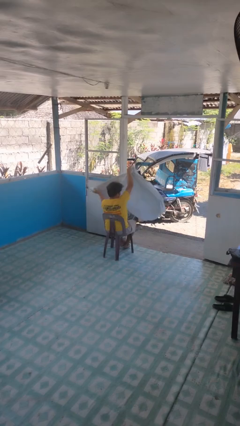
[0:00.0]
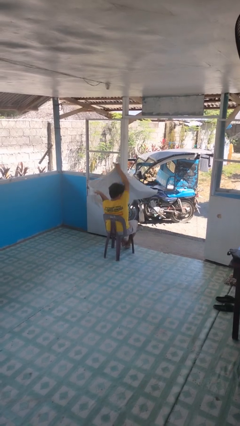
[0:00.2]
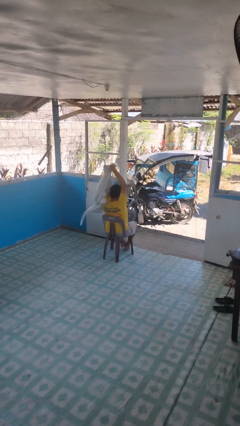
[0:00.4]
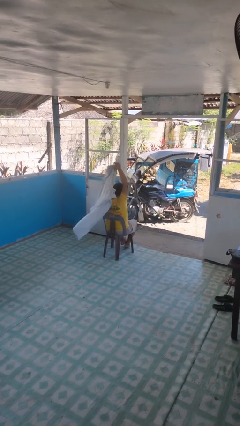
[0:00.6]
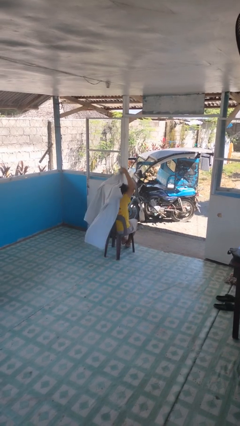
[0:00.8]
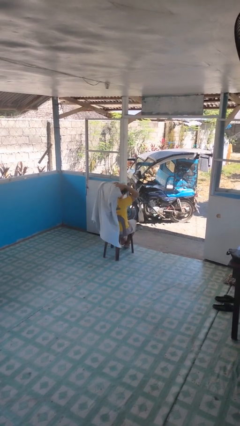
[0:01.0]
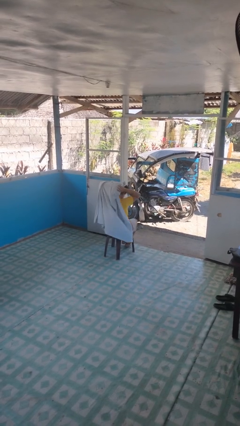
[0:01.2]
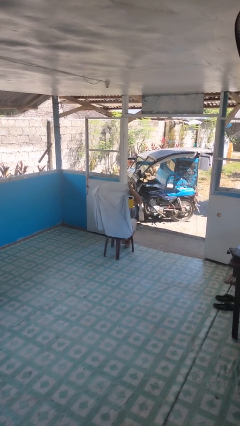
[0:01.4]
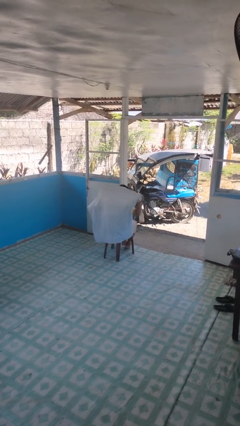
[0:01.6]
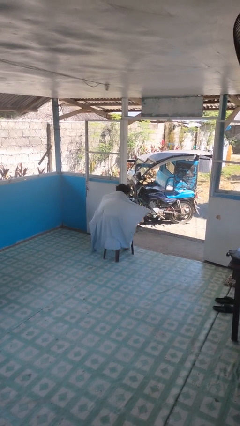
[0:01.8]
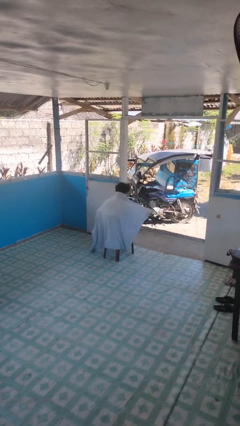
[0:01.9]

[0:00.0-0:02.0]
person covers with blanket

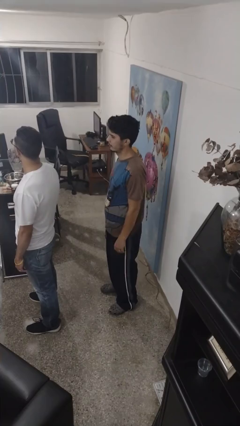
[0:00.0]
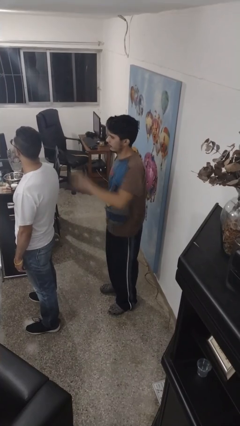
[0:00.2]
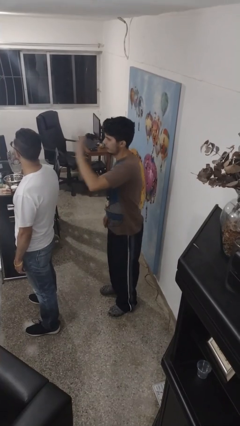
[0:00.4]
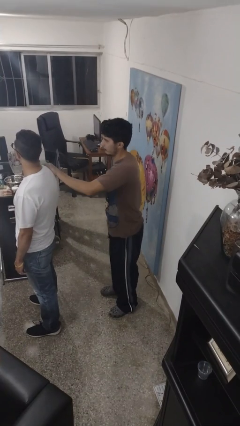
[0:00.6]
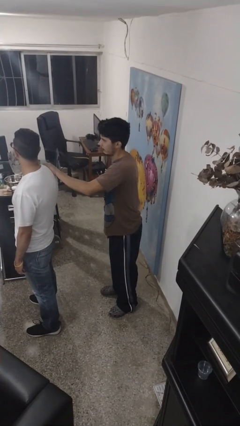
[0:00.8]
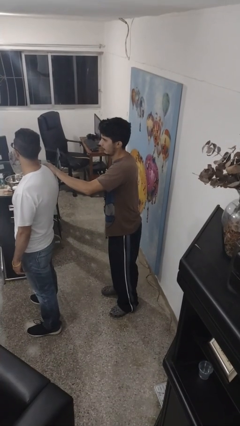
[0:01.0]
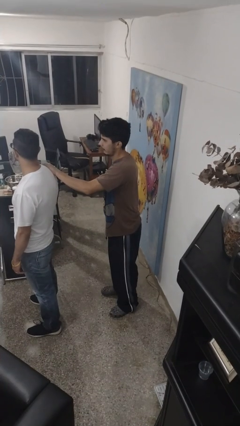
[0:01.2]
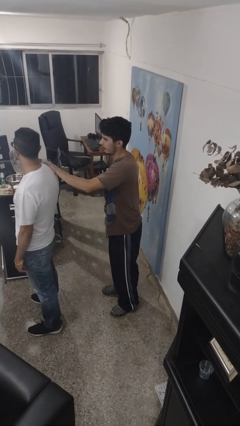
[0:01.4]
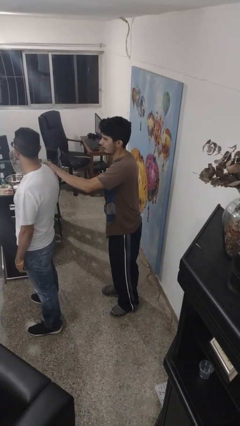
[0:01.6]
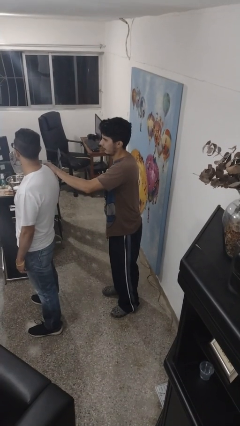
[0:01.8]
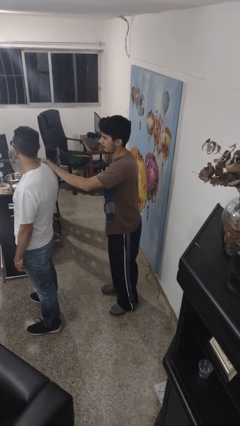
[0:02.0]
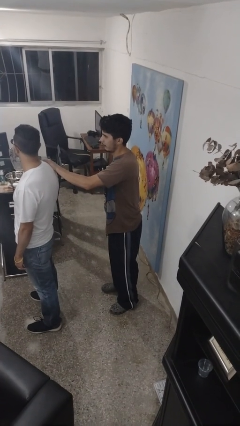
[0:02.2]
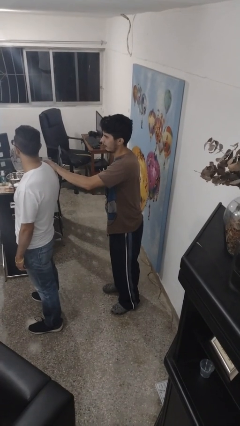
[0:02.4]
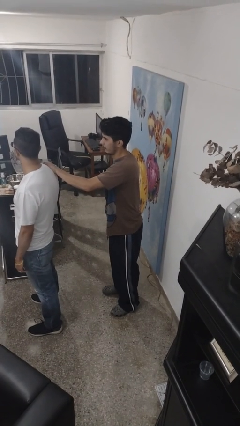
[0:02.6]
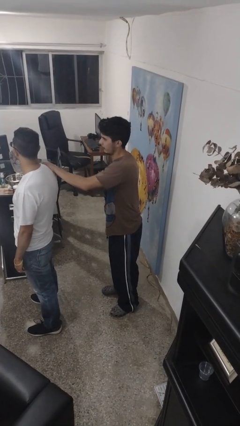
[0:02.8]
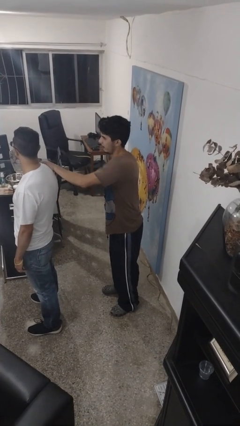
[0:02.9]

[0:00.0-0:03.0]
person grabs person by shoulder

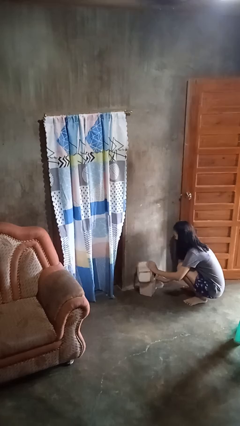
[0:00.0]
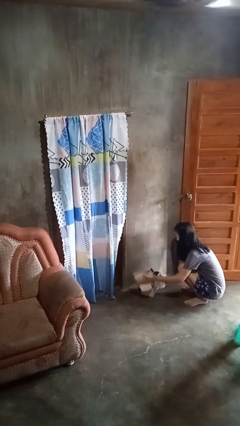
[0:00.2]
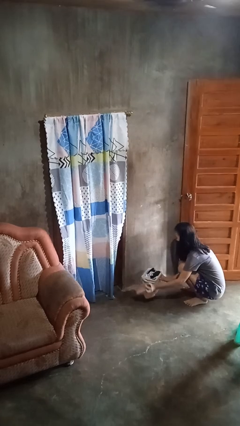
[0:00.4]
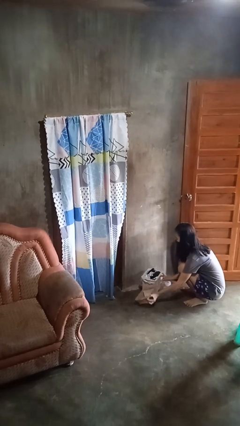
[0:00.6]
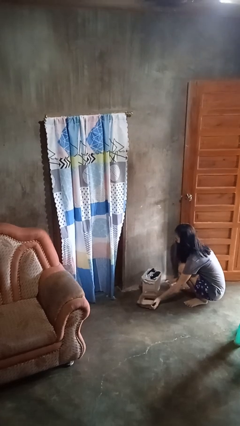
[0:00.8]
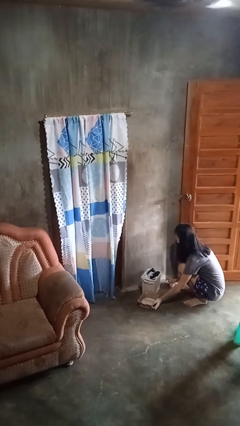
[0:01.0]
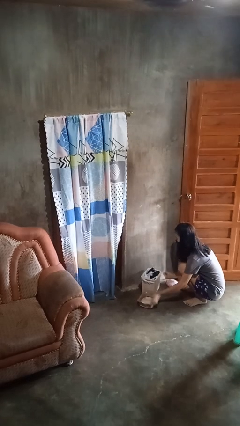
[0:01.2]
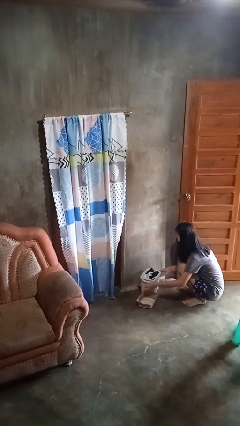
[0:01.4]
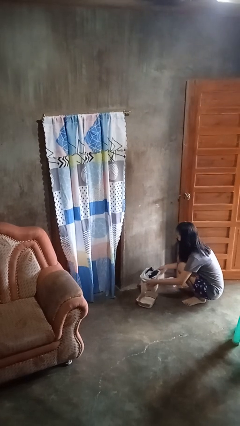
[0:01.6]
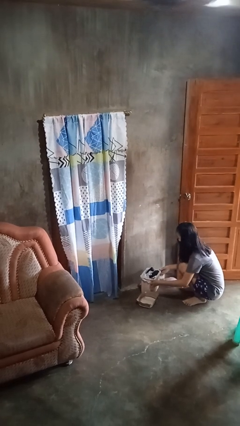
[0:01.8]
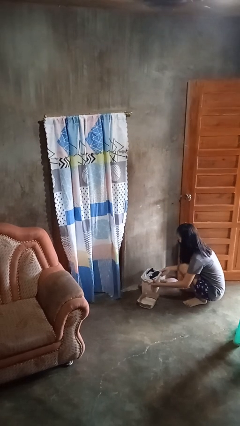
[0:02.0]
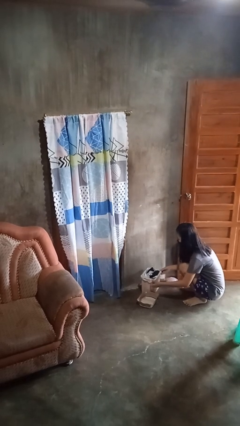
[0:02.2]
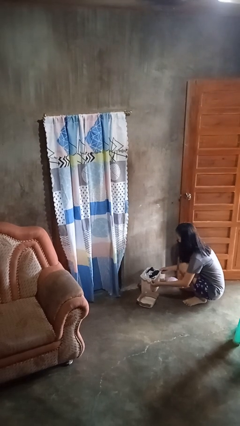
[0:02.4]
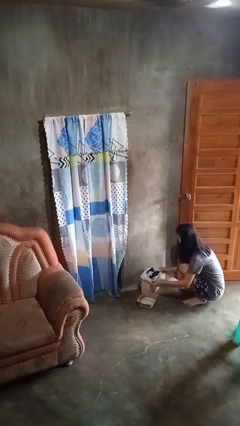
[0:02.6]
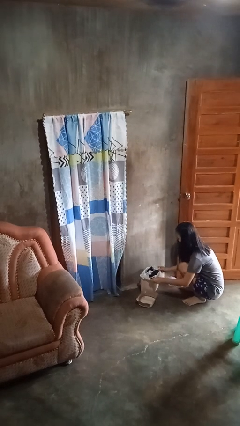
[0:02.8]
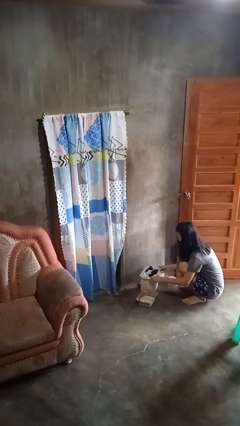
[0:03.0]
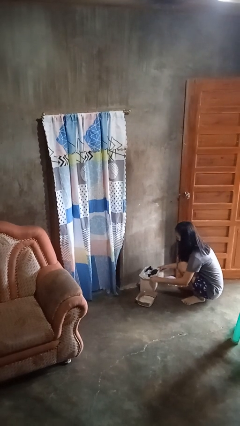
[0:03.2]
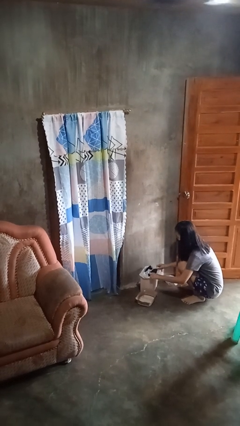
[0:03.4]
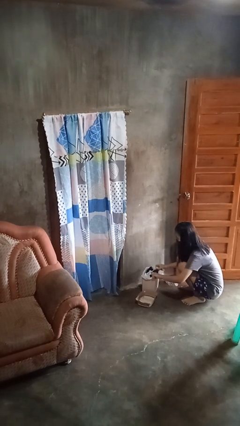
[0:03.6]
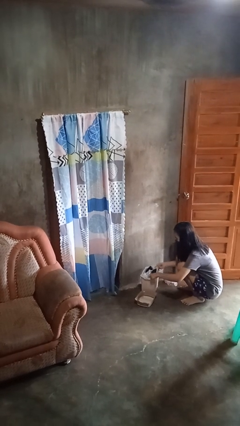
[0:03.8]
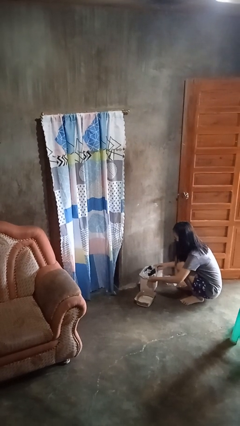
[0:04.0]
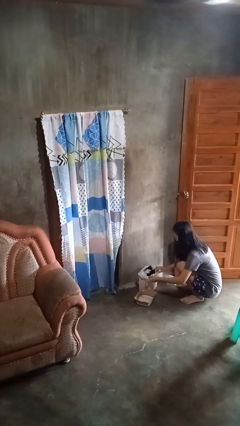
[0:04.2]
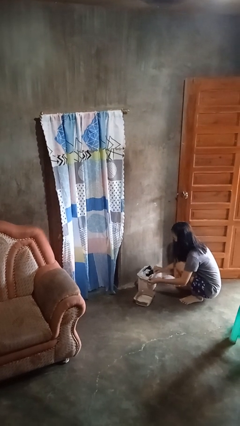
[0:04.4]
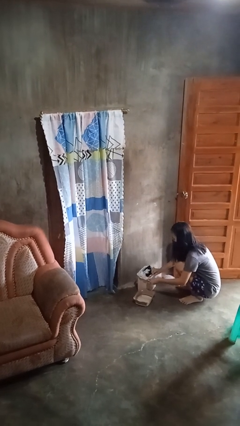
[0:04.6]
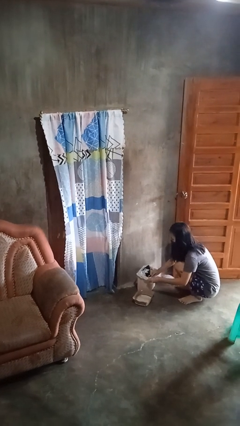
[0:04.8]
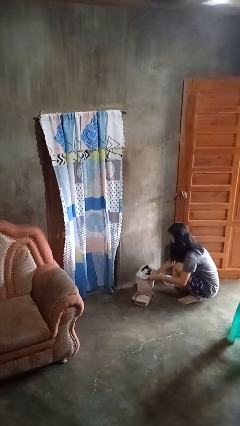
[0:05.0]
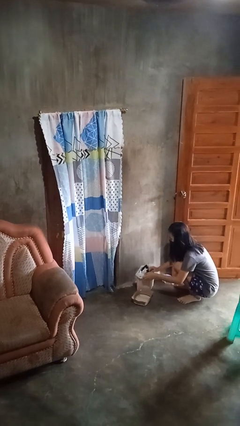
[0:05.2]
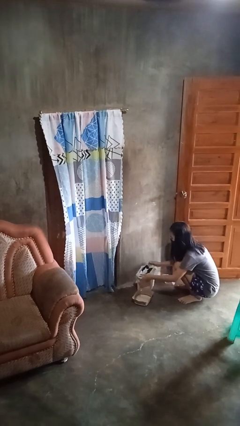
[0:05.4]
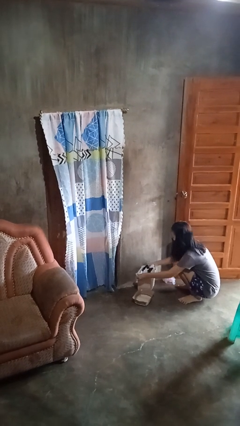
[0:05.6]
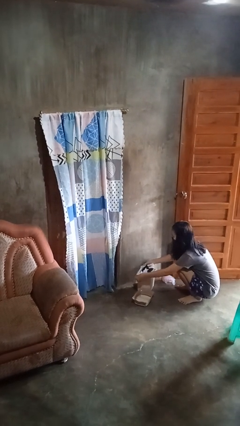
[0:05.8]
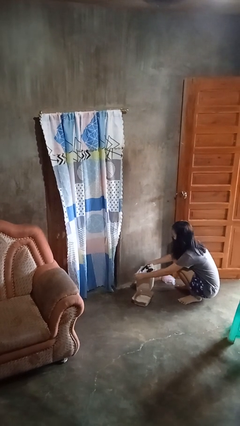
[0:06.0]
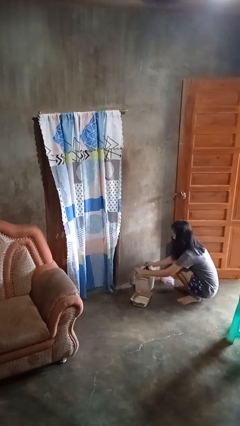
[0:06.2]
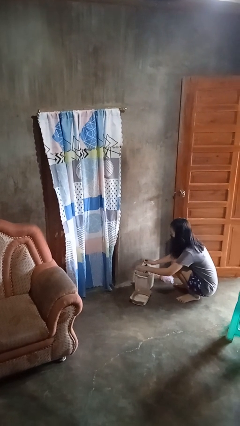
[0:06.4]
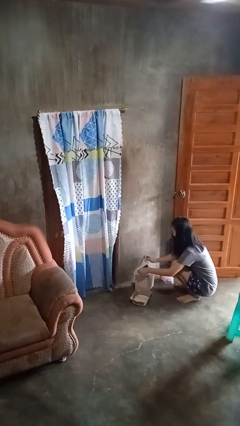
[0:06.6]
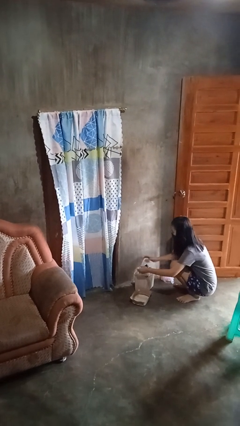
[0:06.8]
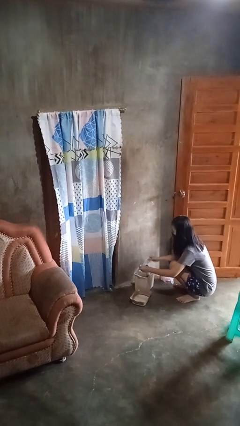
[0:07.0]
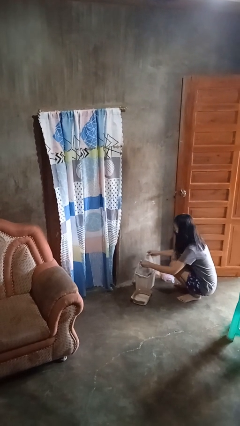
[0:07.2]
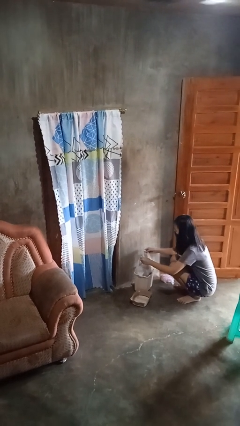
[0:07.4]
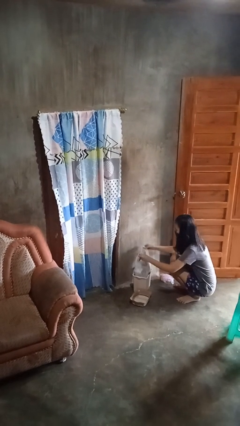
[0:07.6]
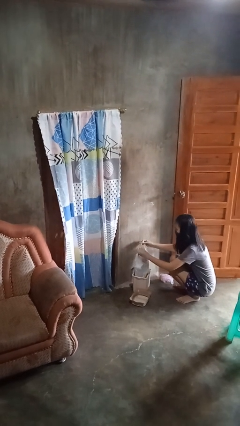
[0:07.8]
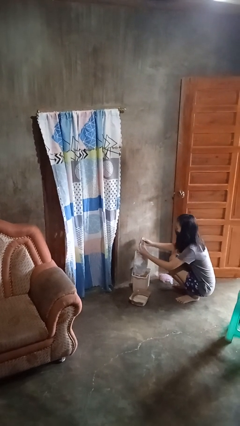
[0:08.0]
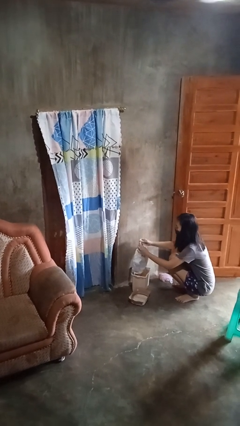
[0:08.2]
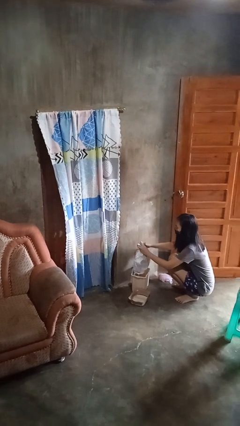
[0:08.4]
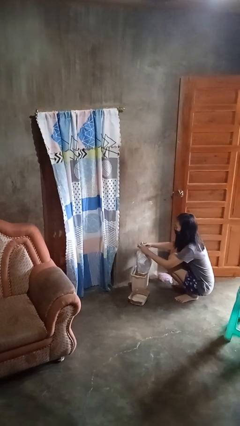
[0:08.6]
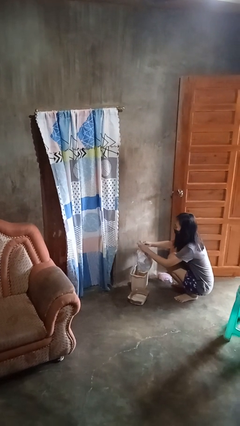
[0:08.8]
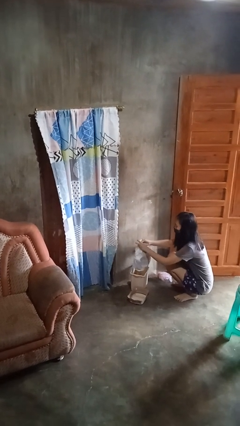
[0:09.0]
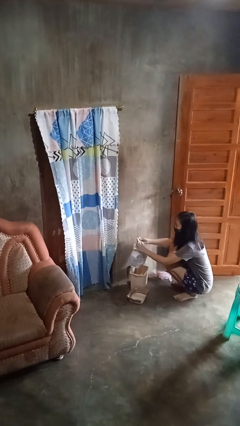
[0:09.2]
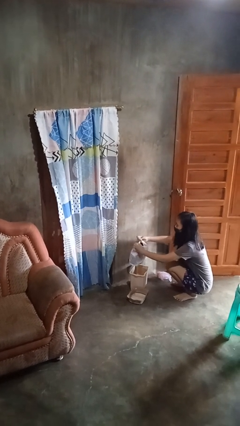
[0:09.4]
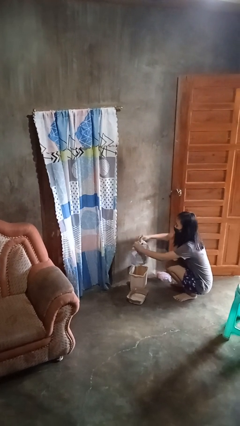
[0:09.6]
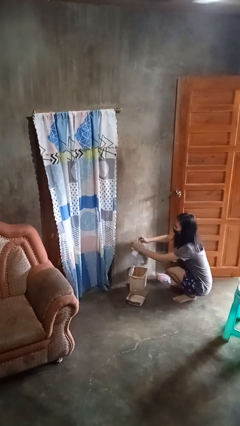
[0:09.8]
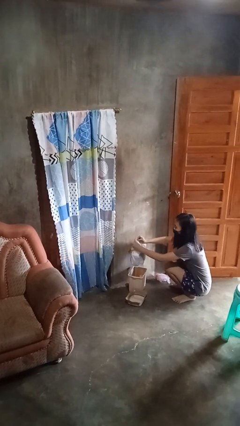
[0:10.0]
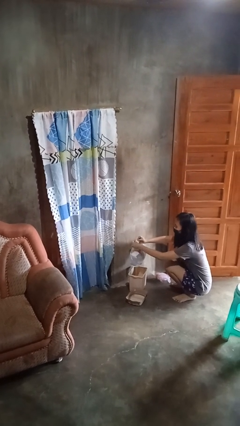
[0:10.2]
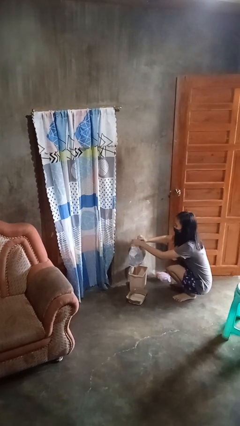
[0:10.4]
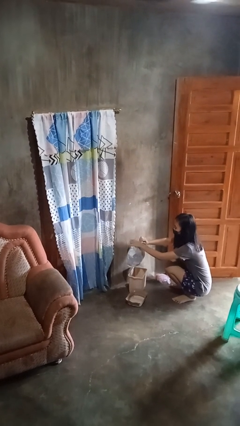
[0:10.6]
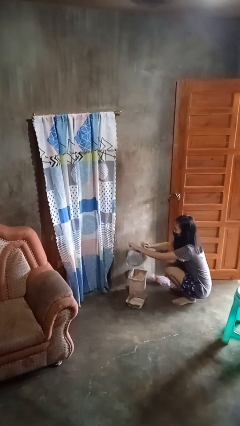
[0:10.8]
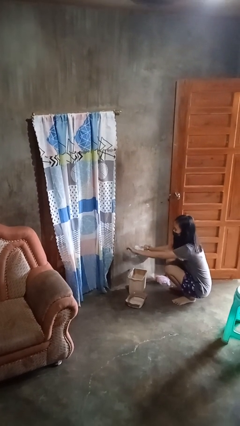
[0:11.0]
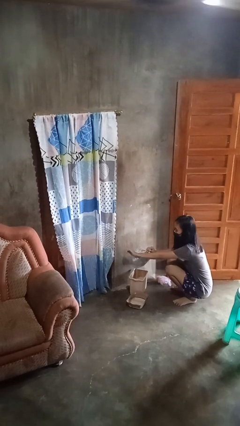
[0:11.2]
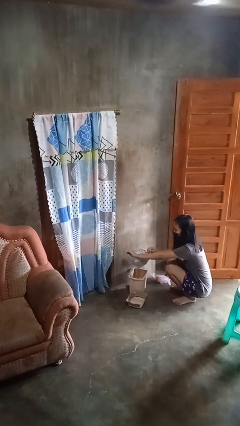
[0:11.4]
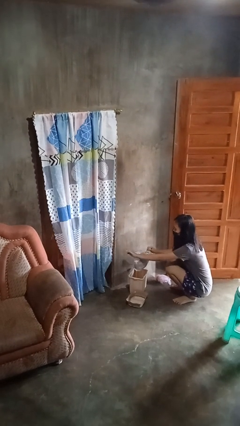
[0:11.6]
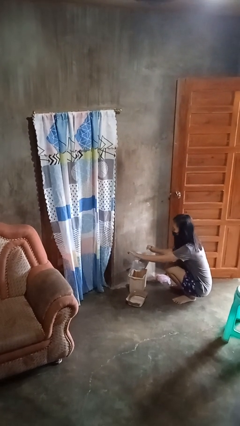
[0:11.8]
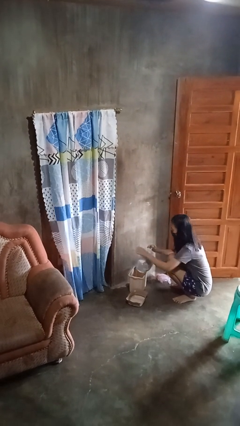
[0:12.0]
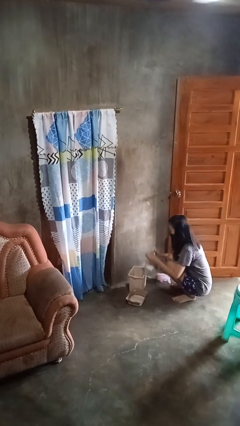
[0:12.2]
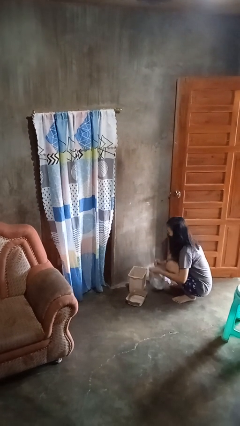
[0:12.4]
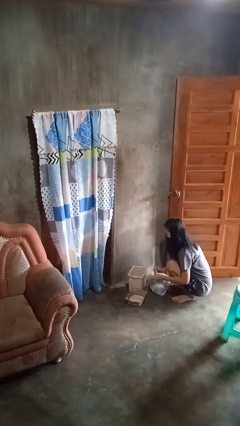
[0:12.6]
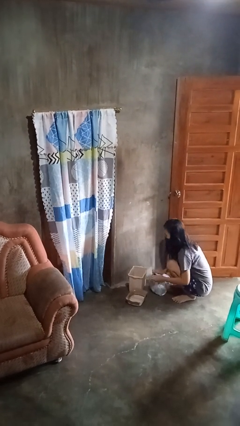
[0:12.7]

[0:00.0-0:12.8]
person removes trashbag from trashcan
